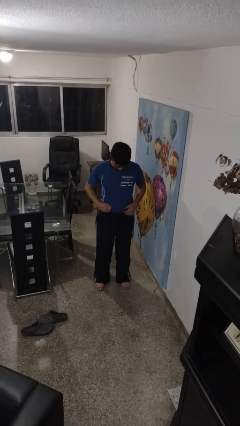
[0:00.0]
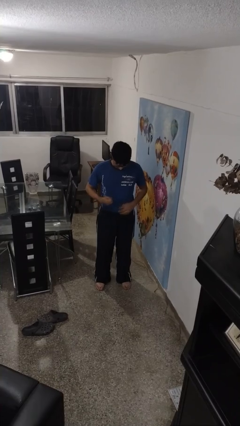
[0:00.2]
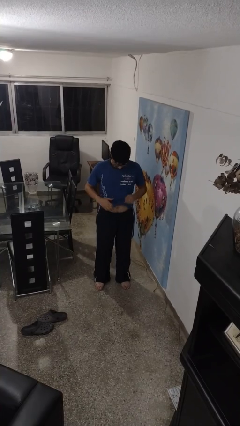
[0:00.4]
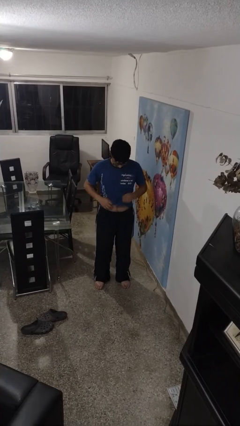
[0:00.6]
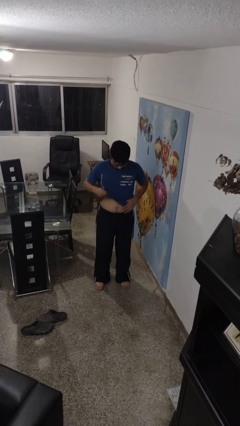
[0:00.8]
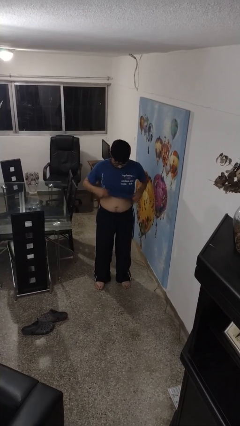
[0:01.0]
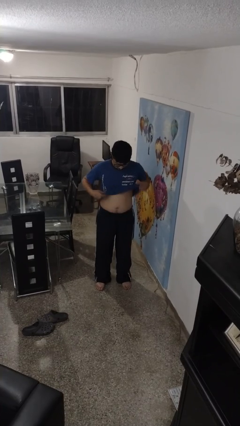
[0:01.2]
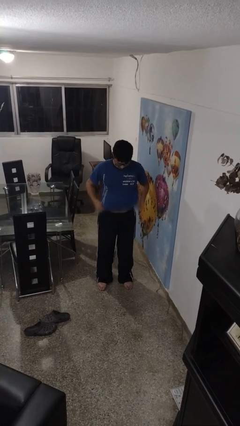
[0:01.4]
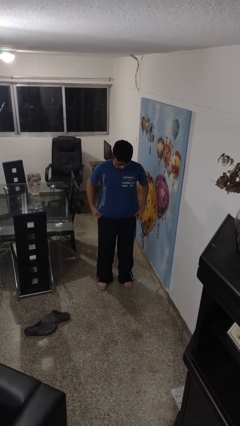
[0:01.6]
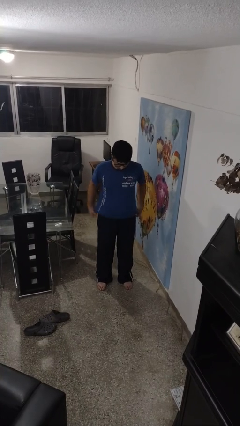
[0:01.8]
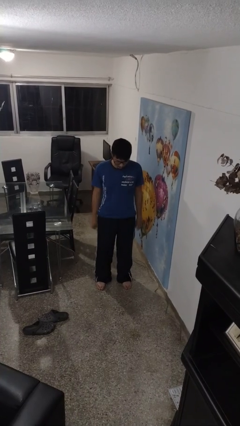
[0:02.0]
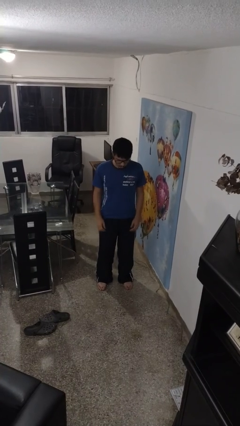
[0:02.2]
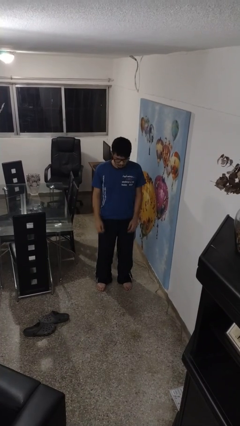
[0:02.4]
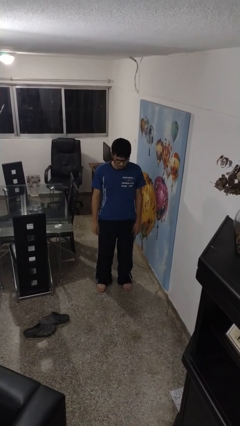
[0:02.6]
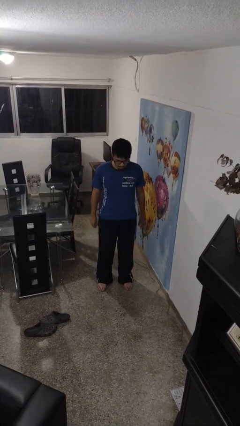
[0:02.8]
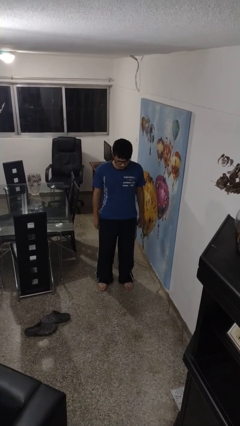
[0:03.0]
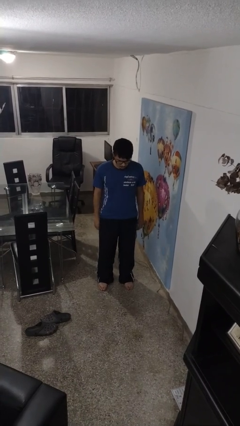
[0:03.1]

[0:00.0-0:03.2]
person untucks shirt

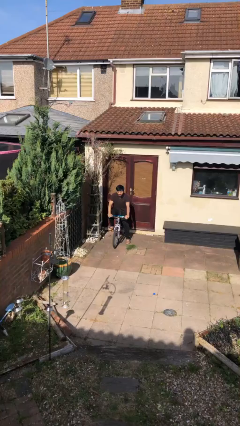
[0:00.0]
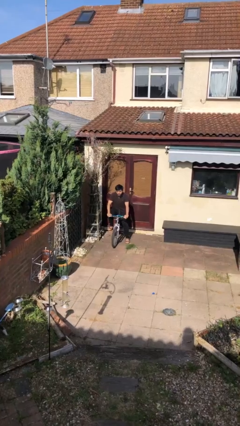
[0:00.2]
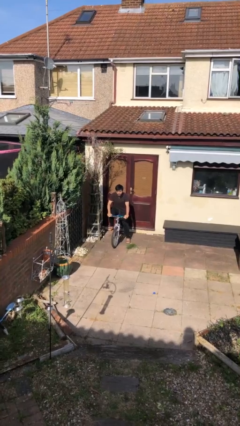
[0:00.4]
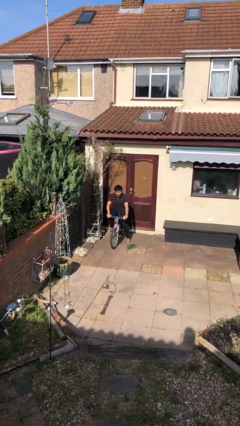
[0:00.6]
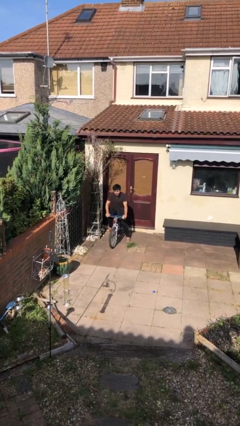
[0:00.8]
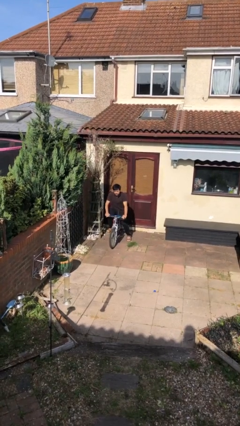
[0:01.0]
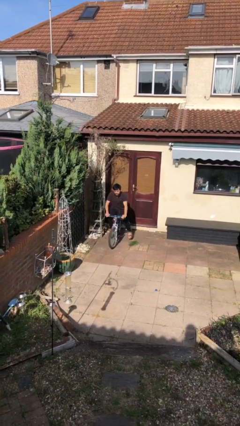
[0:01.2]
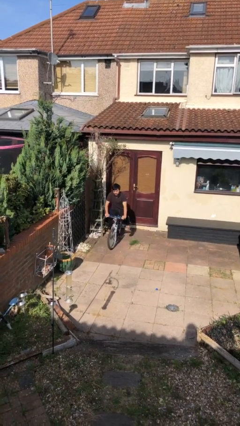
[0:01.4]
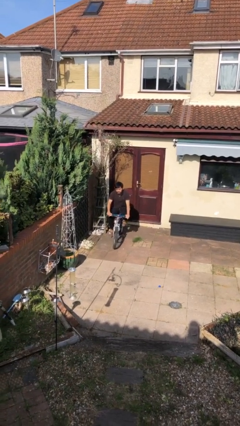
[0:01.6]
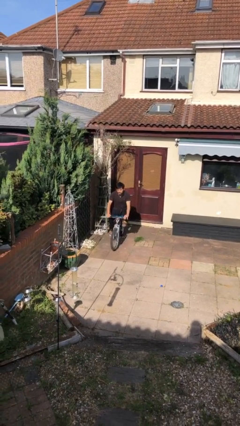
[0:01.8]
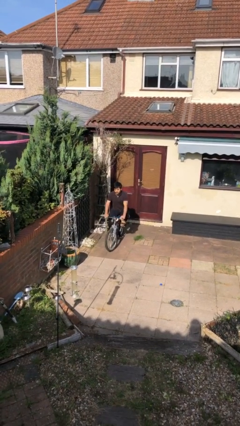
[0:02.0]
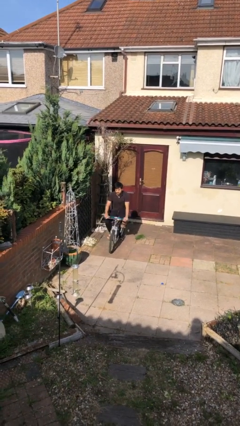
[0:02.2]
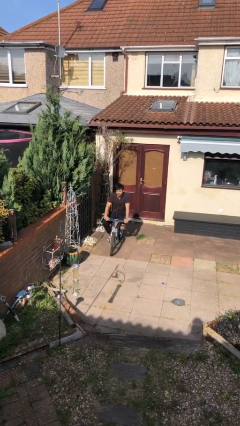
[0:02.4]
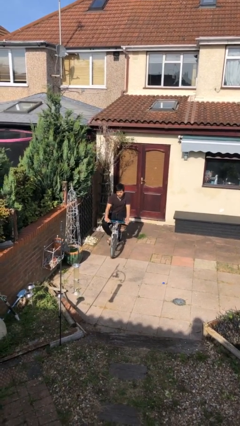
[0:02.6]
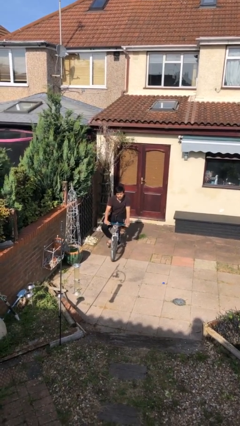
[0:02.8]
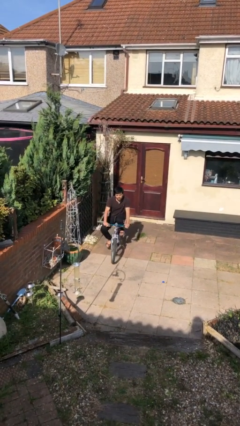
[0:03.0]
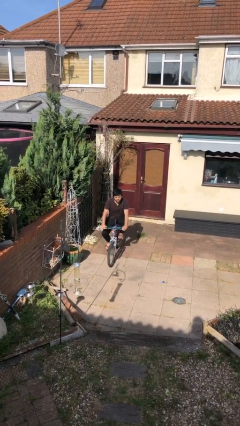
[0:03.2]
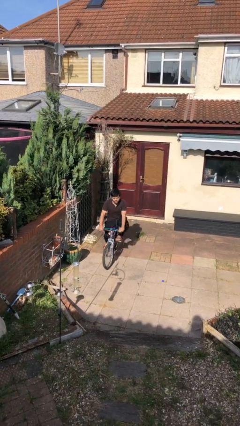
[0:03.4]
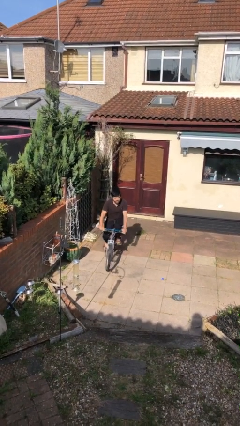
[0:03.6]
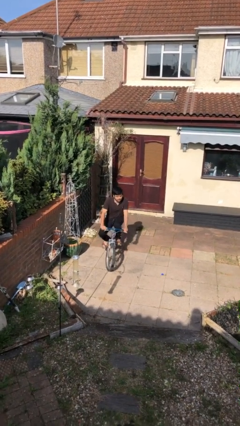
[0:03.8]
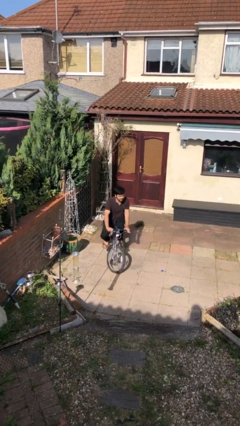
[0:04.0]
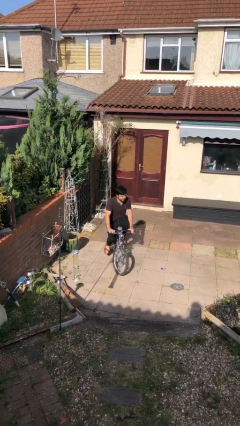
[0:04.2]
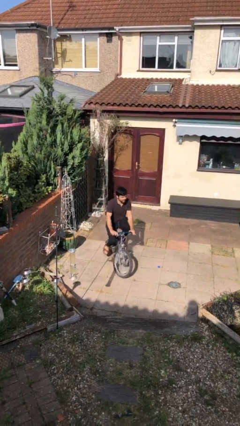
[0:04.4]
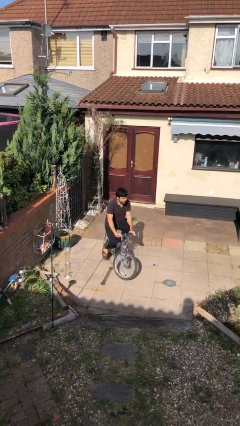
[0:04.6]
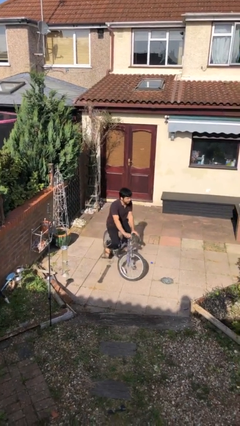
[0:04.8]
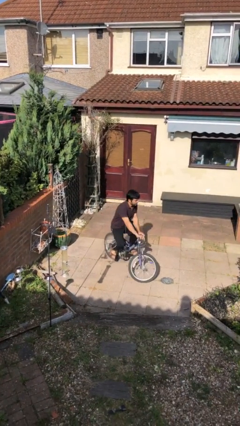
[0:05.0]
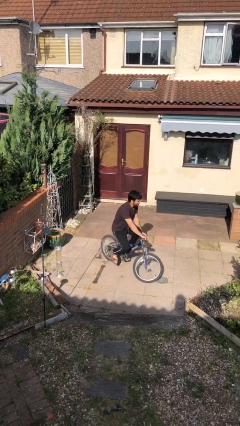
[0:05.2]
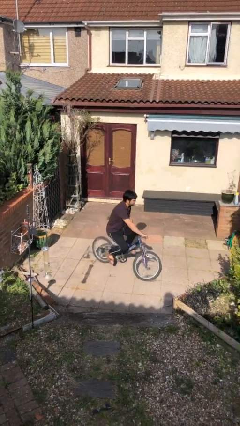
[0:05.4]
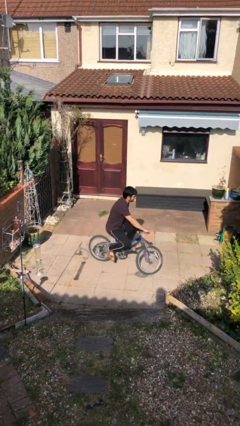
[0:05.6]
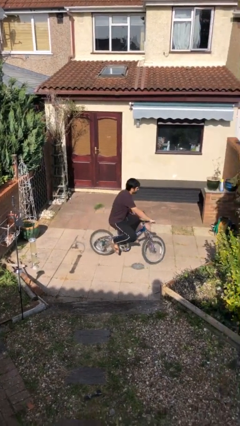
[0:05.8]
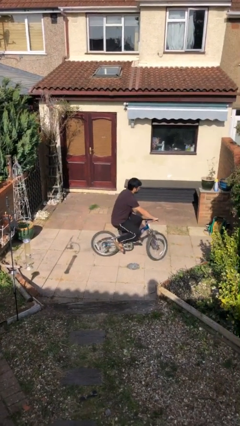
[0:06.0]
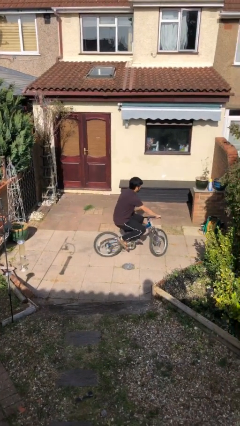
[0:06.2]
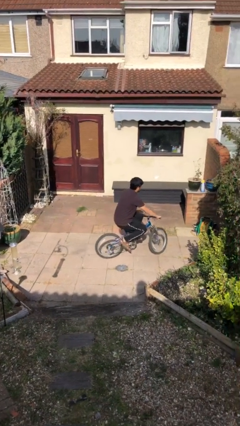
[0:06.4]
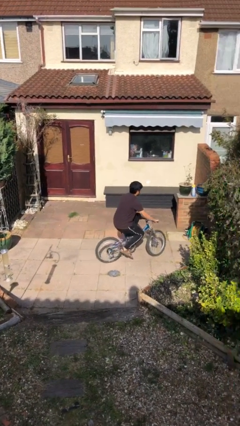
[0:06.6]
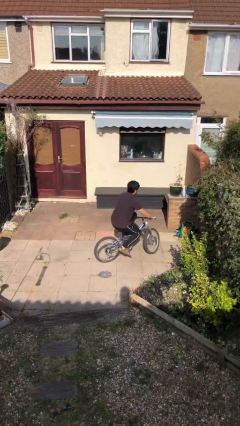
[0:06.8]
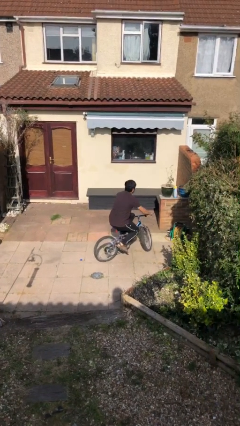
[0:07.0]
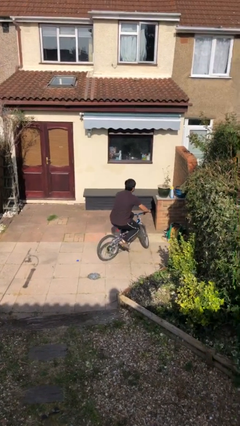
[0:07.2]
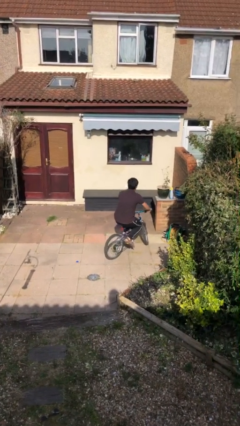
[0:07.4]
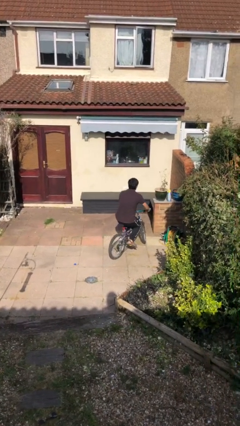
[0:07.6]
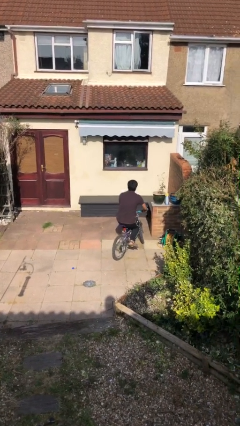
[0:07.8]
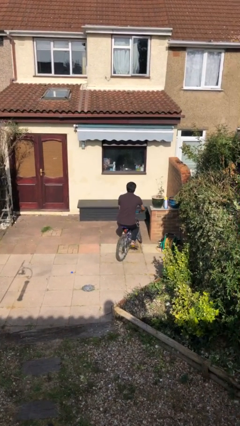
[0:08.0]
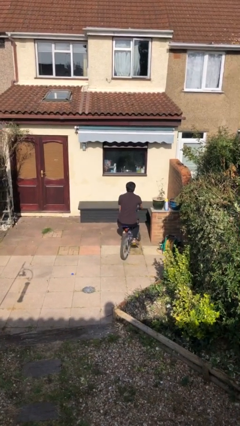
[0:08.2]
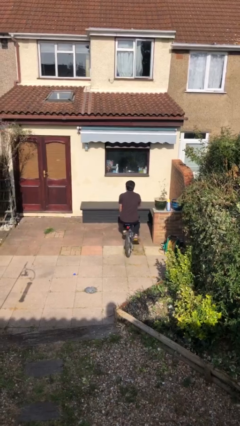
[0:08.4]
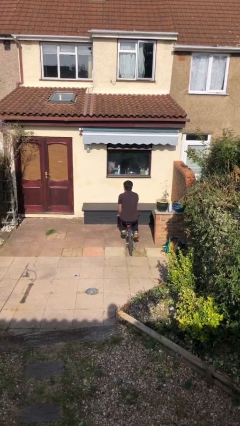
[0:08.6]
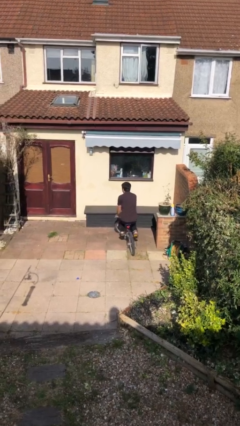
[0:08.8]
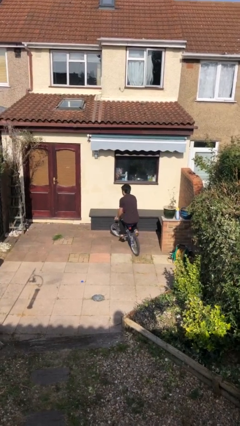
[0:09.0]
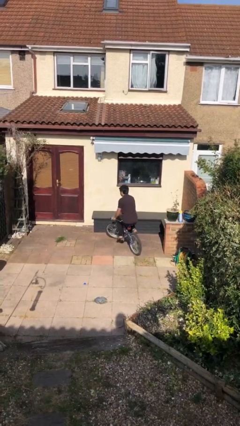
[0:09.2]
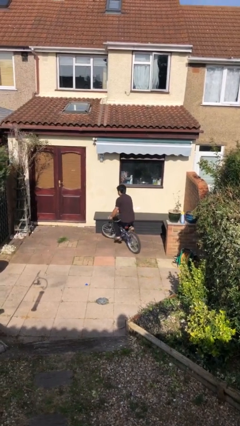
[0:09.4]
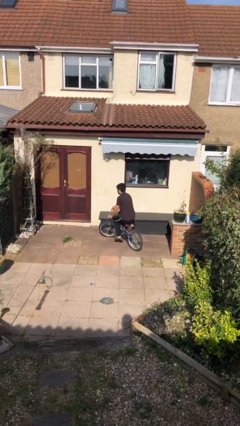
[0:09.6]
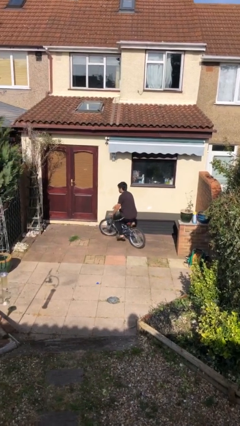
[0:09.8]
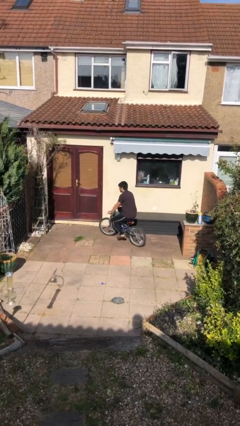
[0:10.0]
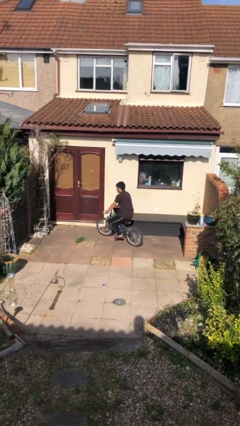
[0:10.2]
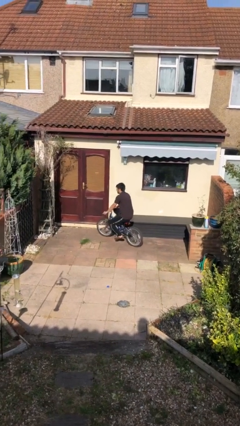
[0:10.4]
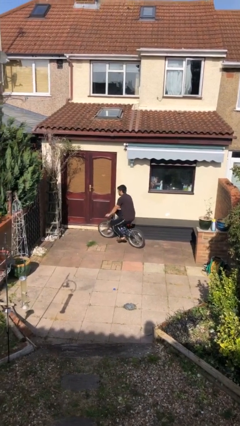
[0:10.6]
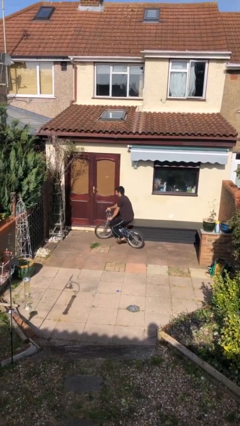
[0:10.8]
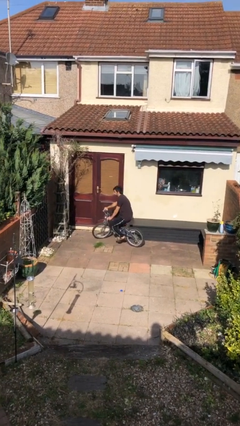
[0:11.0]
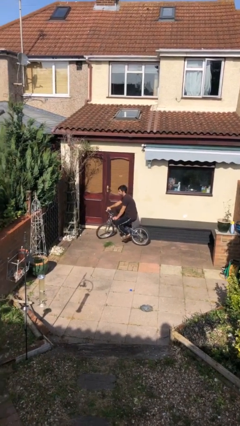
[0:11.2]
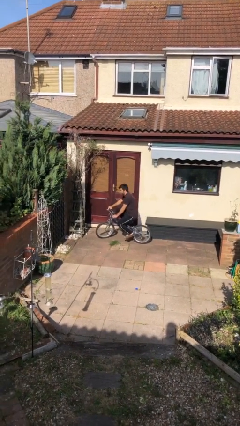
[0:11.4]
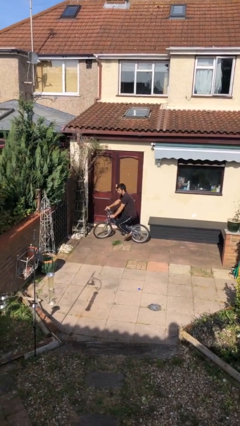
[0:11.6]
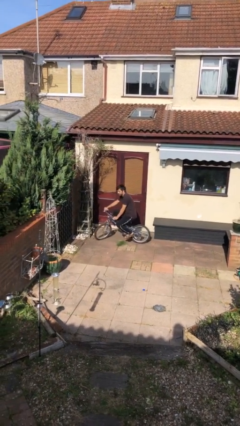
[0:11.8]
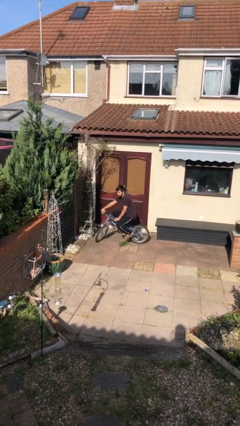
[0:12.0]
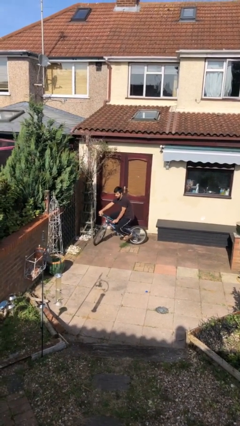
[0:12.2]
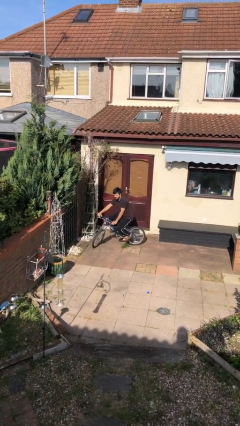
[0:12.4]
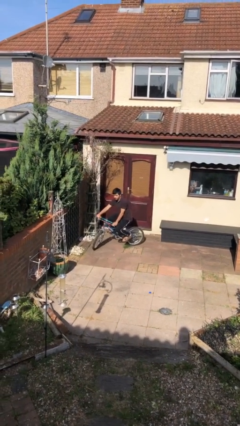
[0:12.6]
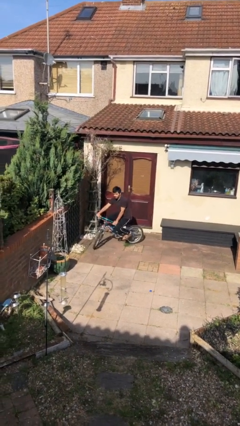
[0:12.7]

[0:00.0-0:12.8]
person rides bicycle

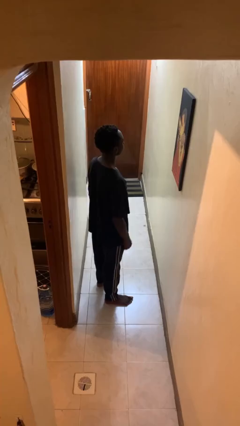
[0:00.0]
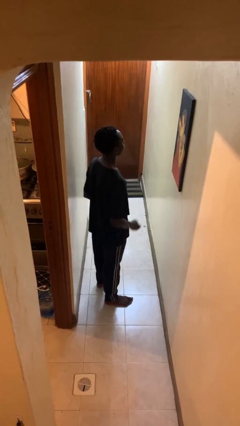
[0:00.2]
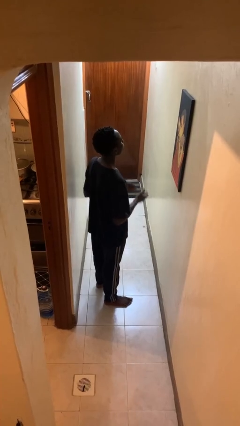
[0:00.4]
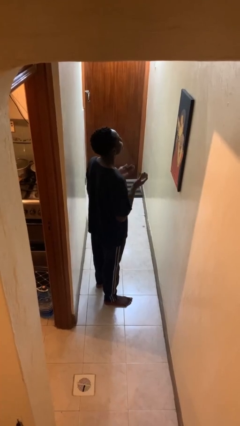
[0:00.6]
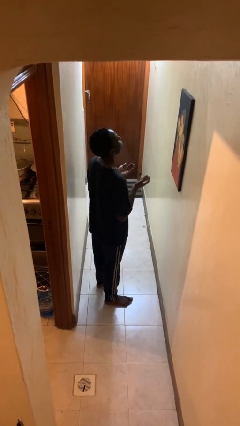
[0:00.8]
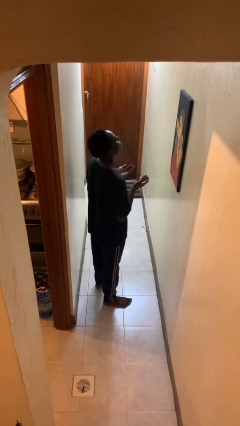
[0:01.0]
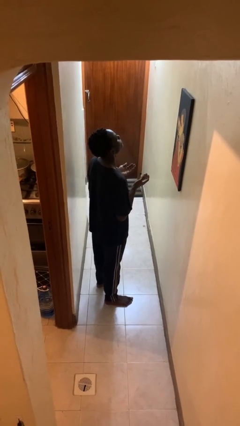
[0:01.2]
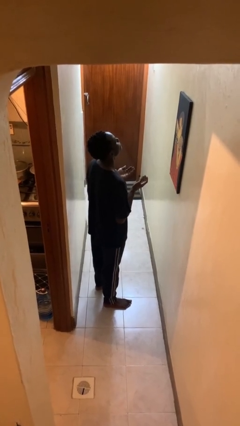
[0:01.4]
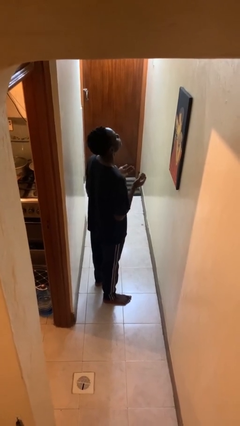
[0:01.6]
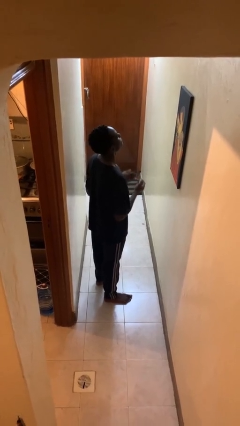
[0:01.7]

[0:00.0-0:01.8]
person prays
